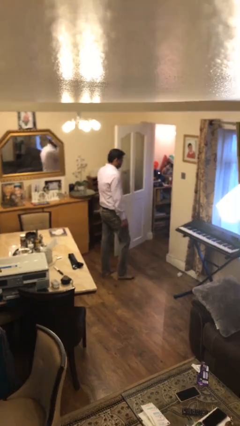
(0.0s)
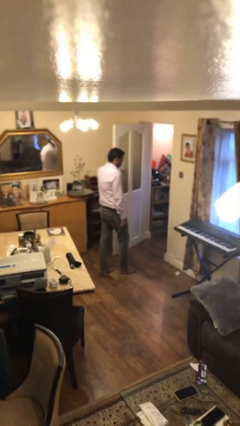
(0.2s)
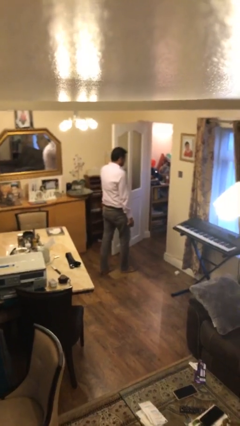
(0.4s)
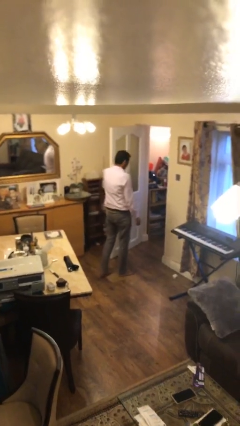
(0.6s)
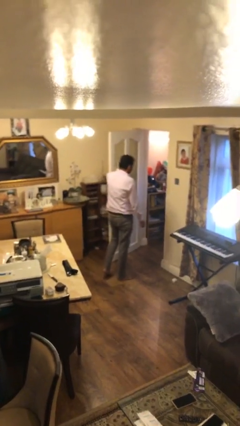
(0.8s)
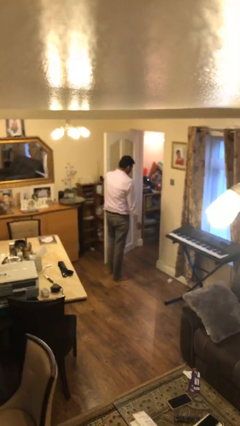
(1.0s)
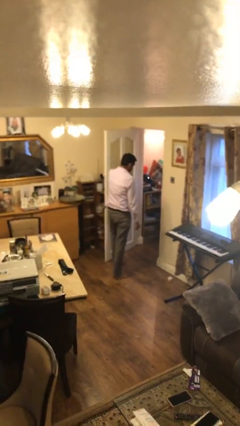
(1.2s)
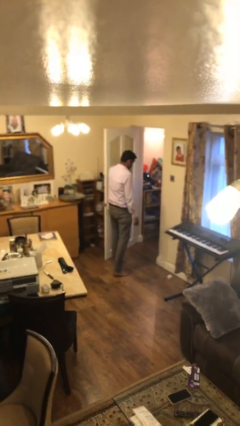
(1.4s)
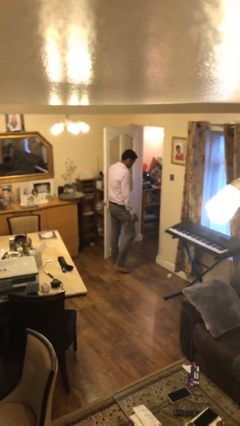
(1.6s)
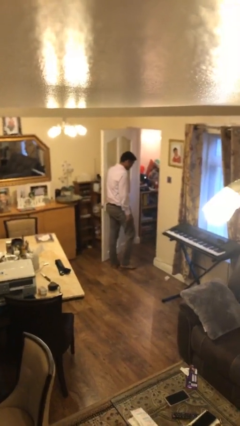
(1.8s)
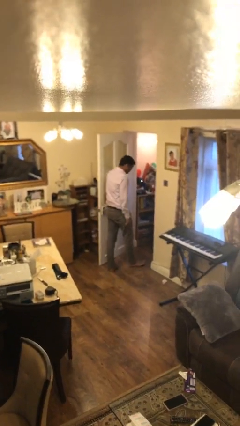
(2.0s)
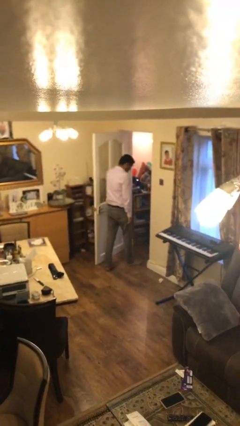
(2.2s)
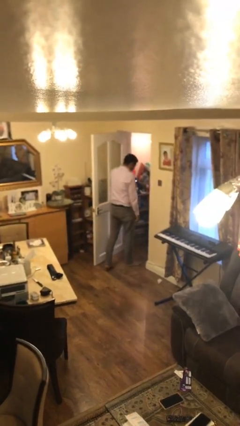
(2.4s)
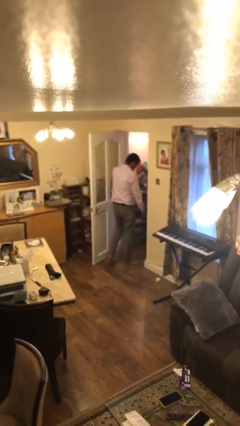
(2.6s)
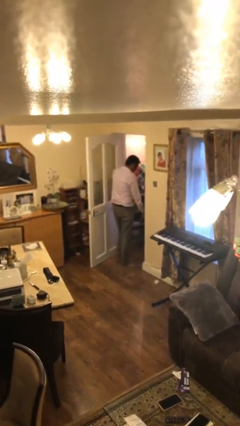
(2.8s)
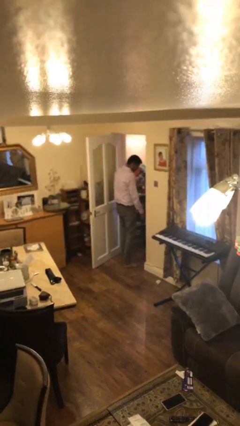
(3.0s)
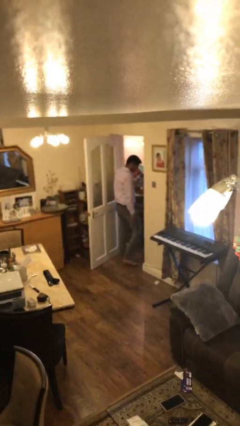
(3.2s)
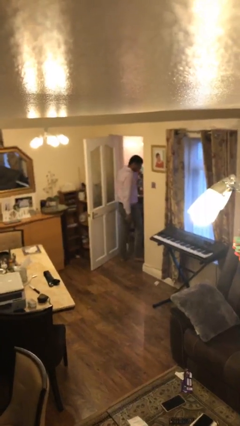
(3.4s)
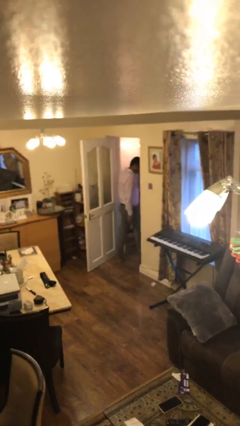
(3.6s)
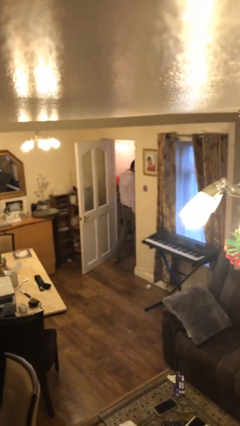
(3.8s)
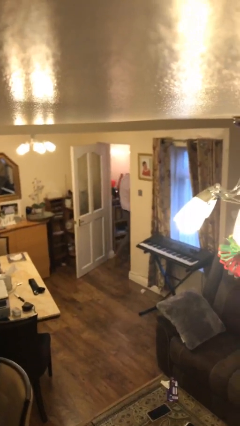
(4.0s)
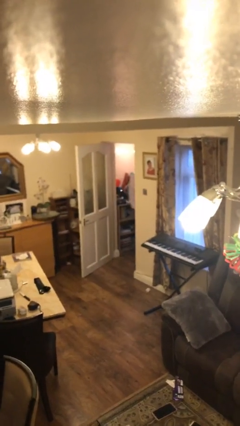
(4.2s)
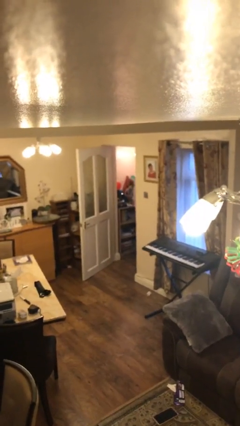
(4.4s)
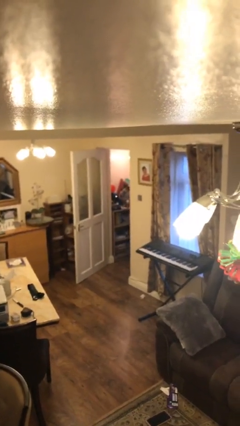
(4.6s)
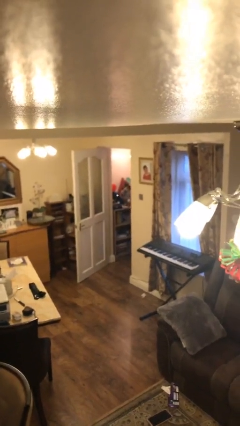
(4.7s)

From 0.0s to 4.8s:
person exits scene through structure

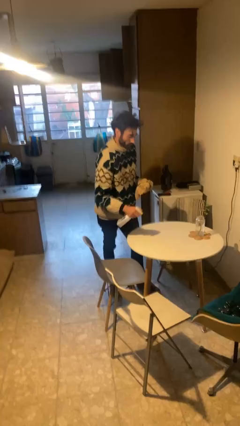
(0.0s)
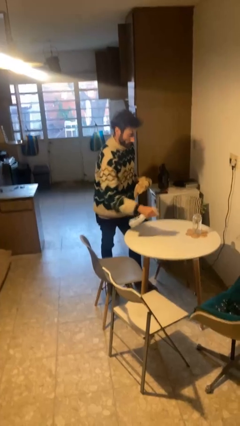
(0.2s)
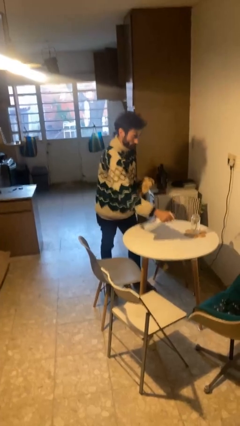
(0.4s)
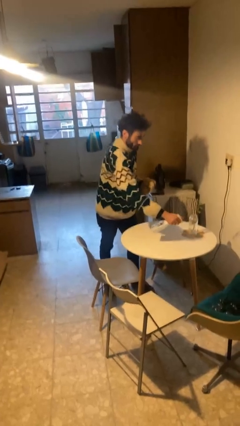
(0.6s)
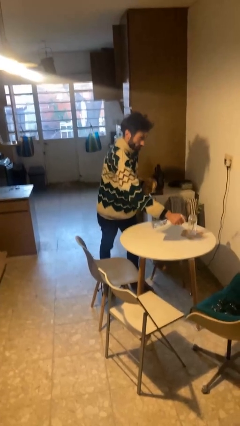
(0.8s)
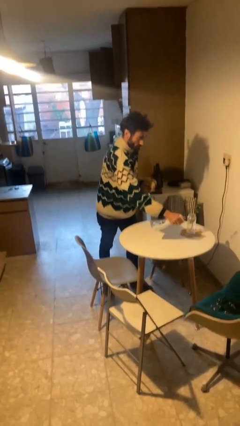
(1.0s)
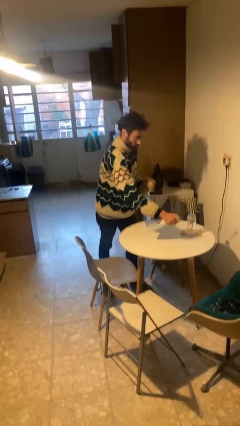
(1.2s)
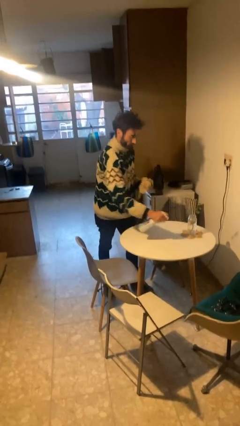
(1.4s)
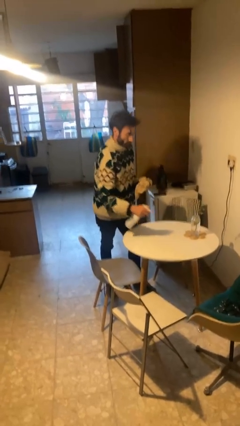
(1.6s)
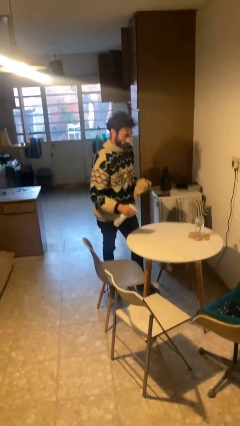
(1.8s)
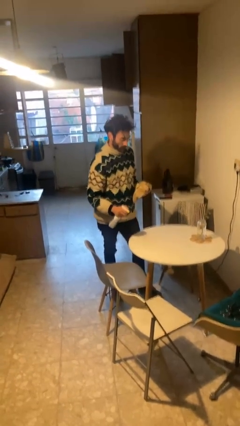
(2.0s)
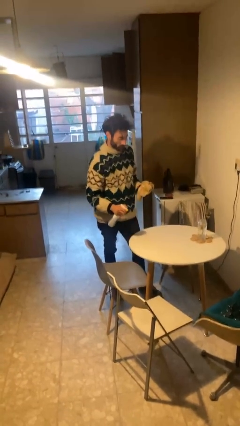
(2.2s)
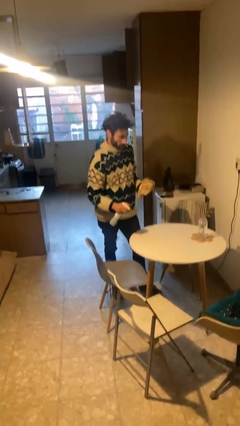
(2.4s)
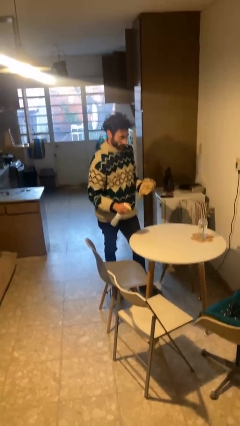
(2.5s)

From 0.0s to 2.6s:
person sprays from bottle

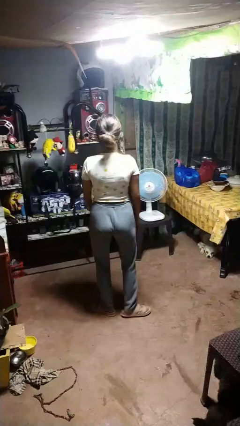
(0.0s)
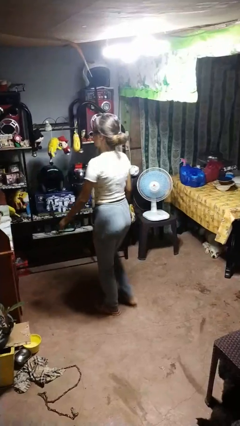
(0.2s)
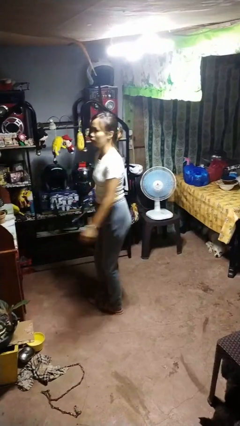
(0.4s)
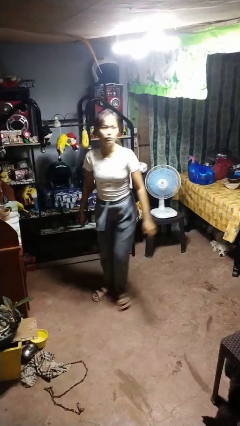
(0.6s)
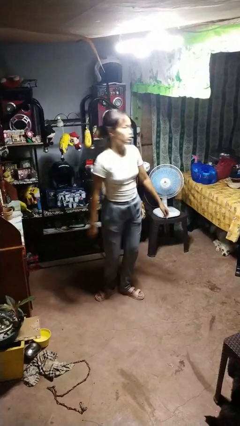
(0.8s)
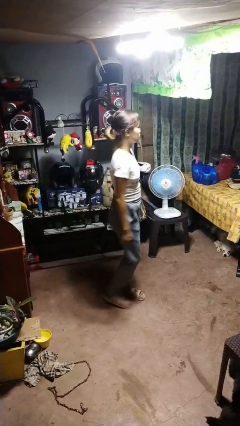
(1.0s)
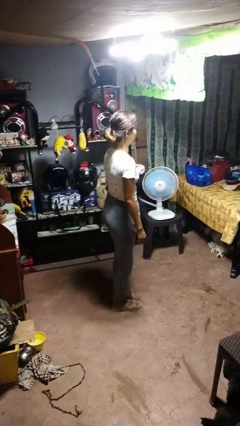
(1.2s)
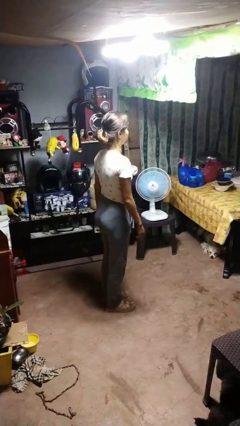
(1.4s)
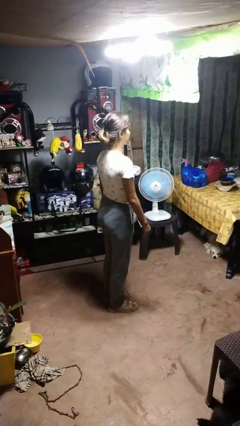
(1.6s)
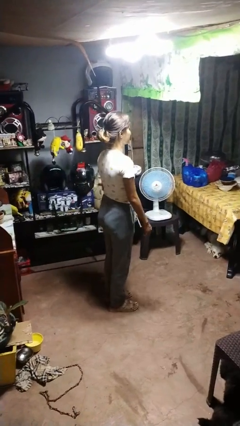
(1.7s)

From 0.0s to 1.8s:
person twirls

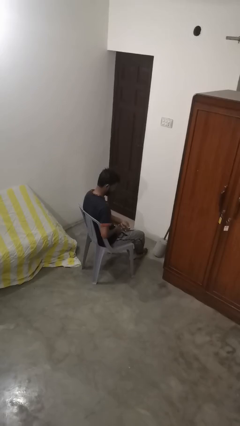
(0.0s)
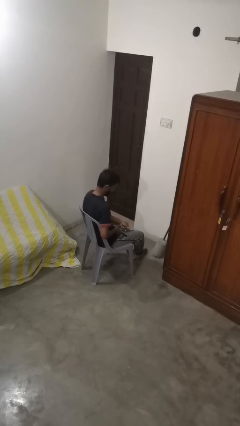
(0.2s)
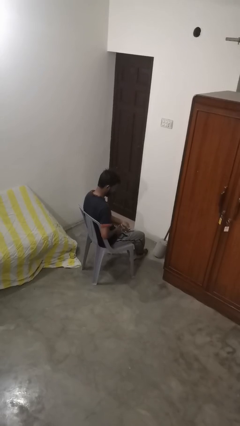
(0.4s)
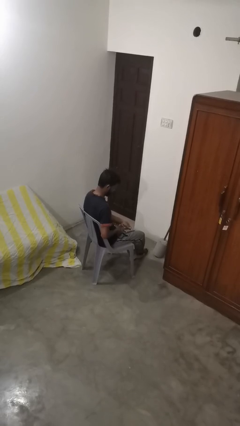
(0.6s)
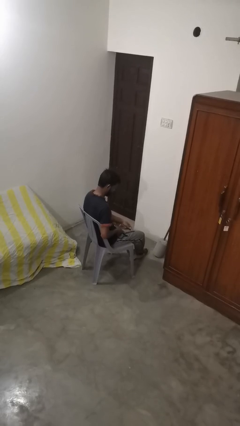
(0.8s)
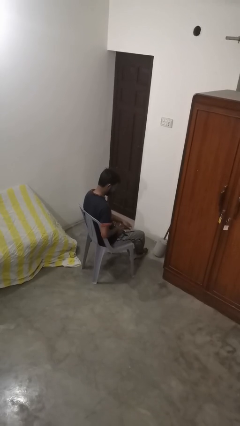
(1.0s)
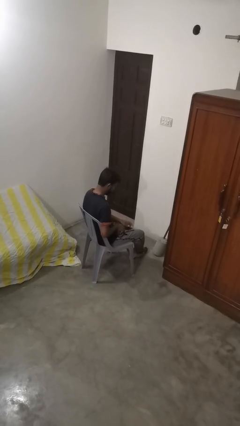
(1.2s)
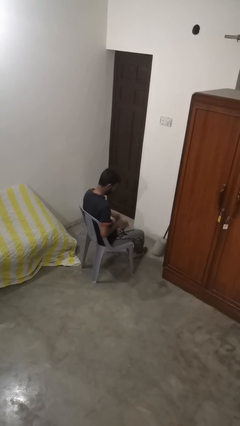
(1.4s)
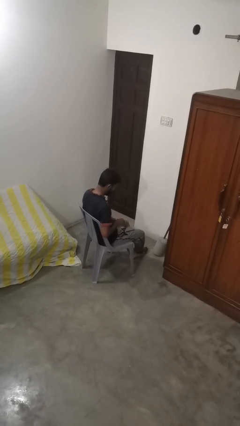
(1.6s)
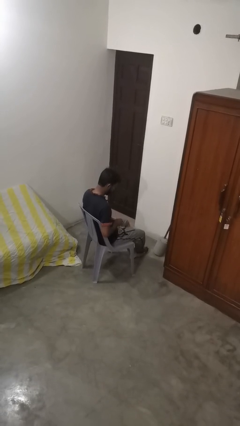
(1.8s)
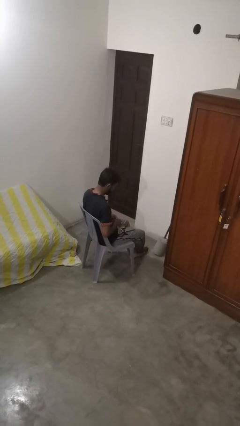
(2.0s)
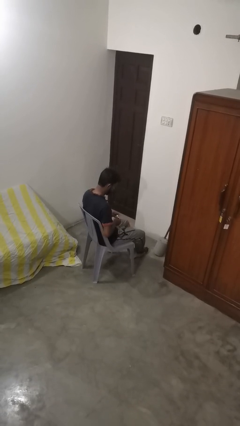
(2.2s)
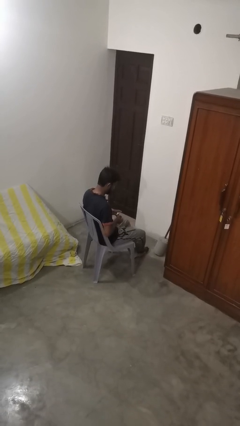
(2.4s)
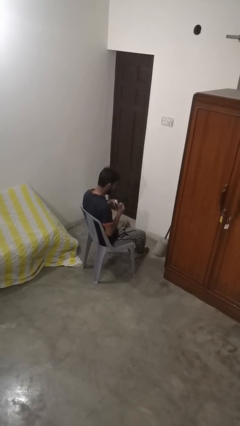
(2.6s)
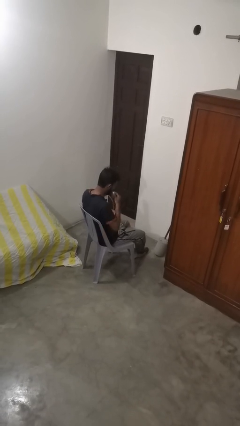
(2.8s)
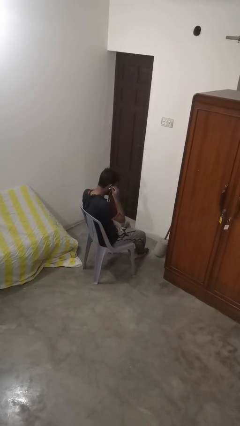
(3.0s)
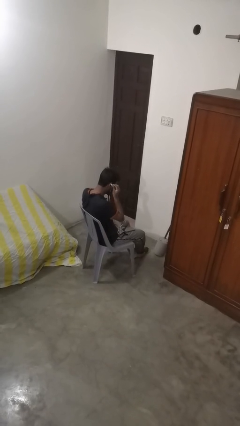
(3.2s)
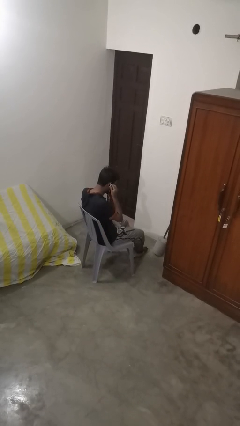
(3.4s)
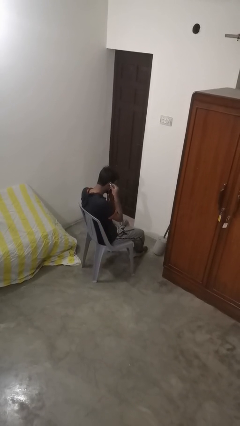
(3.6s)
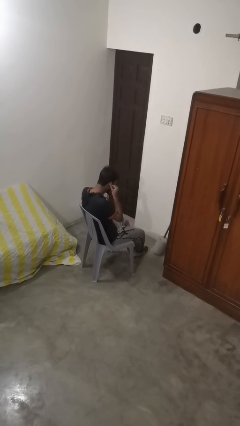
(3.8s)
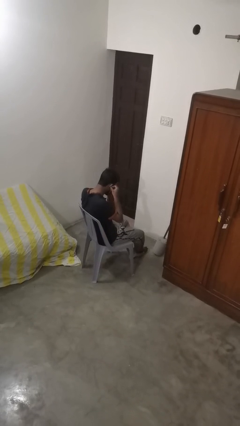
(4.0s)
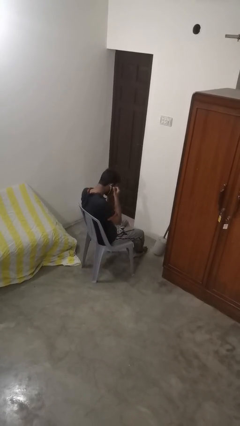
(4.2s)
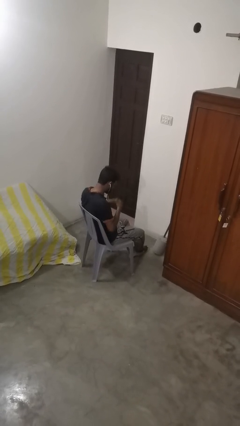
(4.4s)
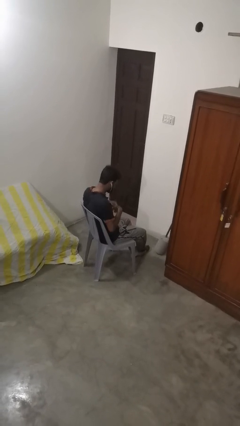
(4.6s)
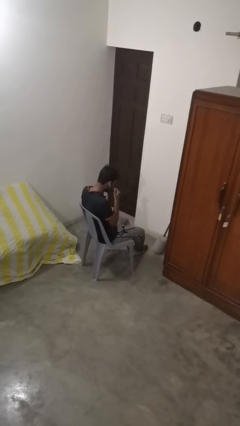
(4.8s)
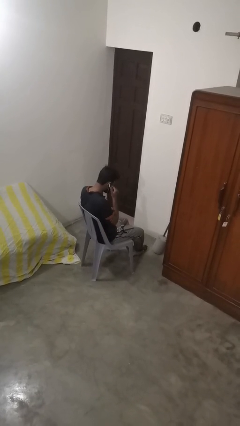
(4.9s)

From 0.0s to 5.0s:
person puts on headphones

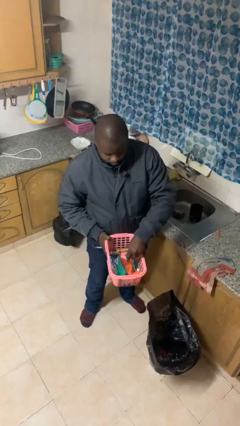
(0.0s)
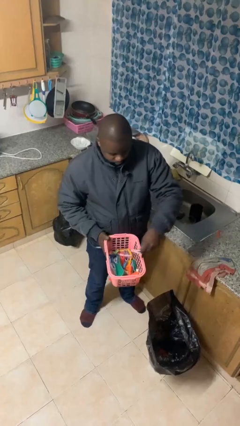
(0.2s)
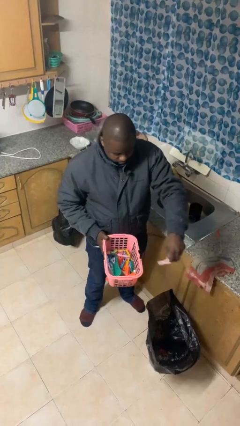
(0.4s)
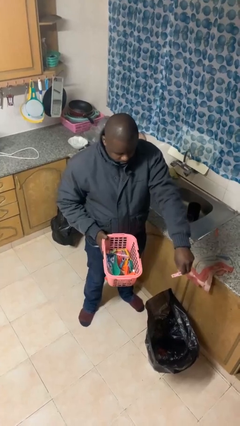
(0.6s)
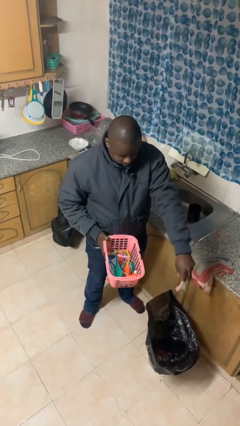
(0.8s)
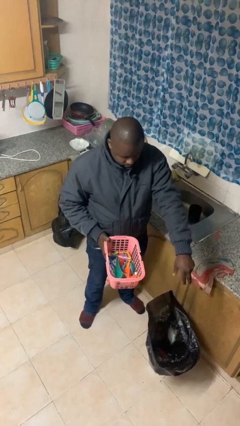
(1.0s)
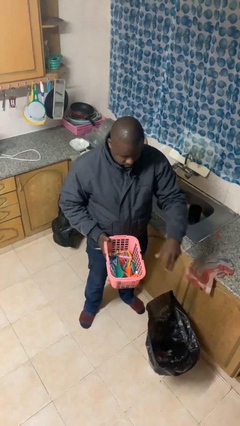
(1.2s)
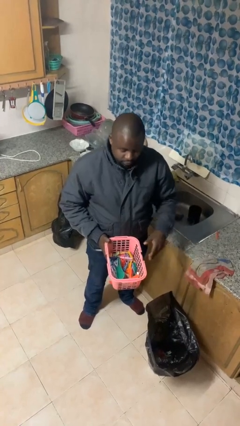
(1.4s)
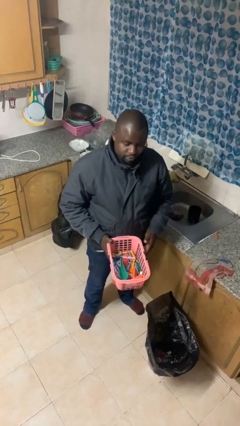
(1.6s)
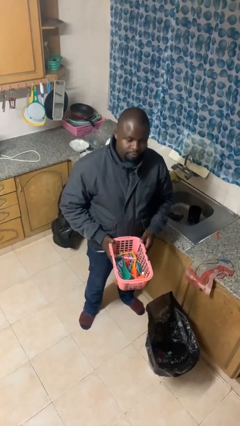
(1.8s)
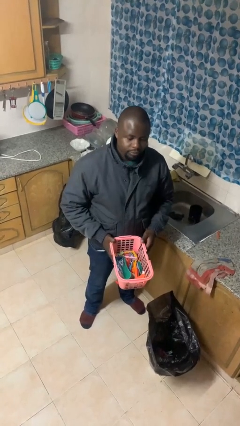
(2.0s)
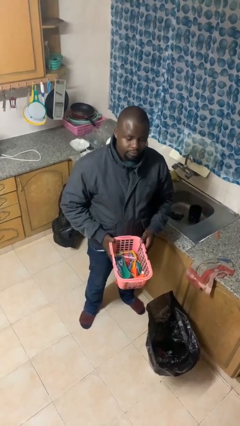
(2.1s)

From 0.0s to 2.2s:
person discards trash

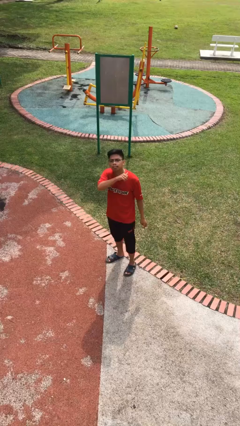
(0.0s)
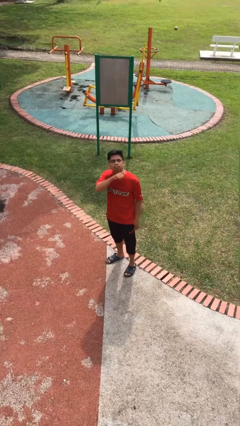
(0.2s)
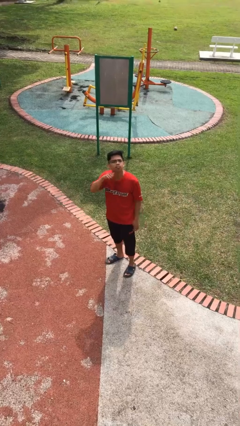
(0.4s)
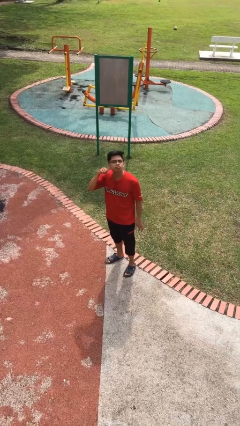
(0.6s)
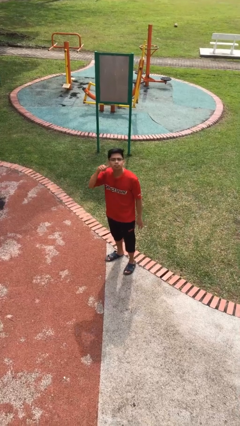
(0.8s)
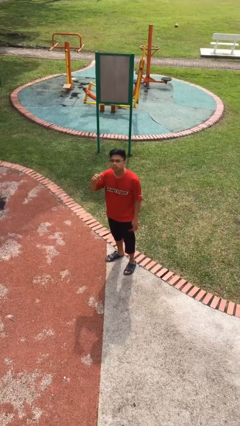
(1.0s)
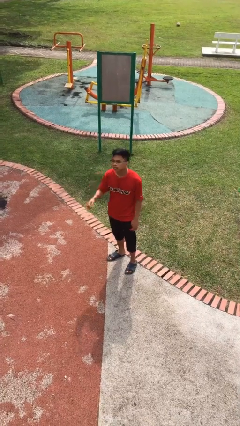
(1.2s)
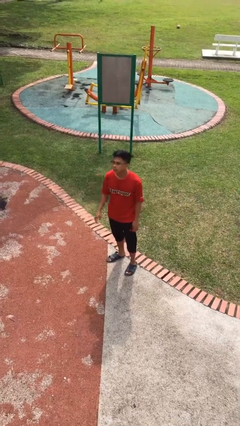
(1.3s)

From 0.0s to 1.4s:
person gestures cut
